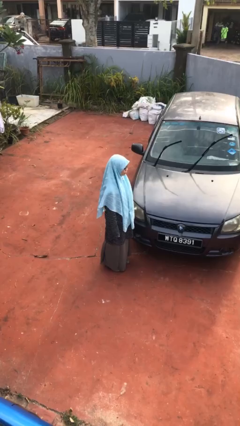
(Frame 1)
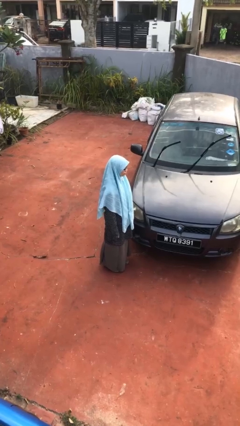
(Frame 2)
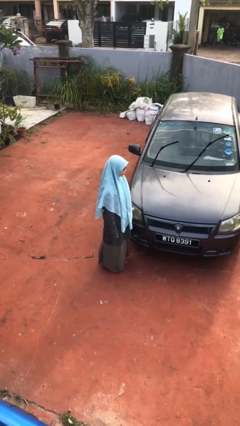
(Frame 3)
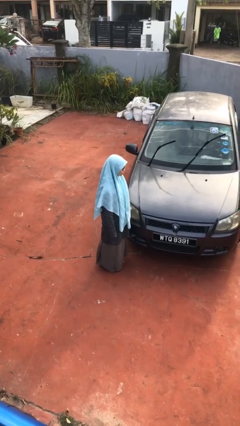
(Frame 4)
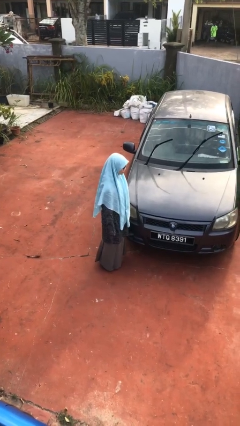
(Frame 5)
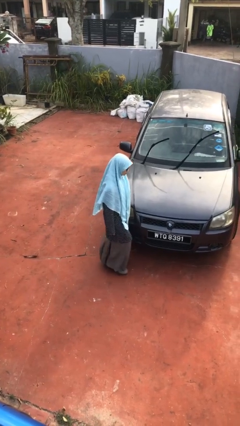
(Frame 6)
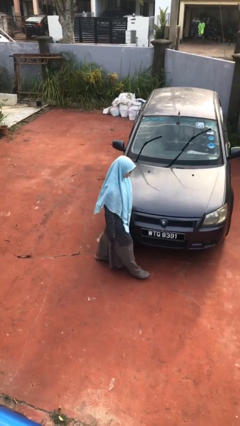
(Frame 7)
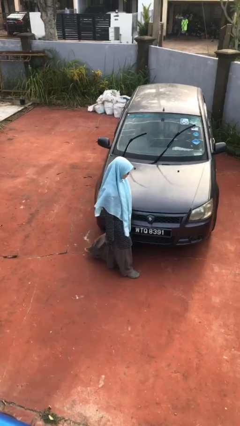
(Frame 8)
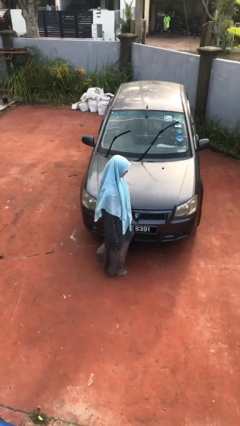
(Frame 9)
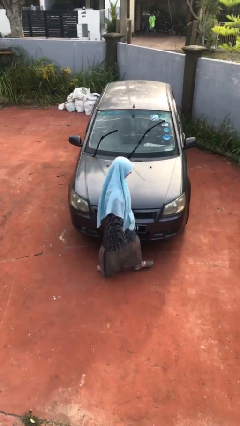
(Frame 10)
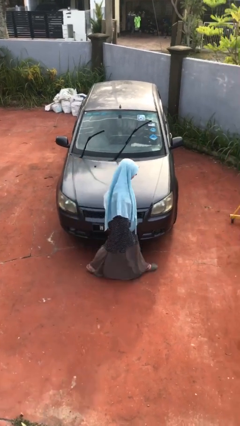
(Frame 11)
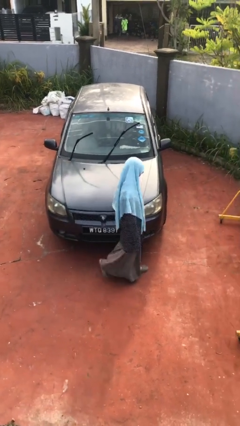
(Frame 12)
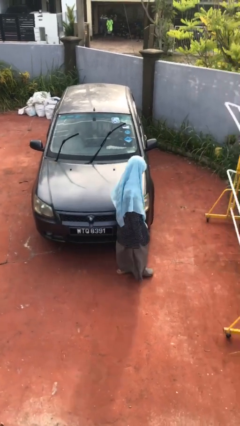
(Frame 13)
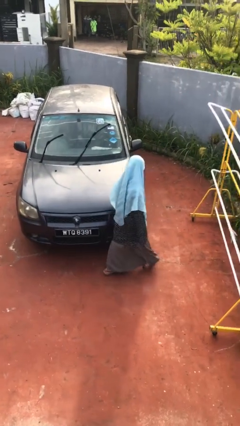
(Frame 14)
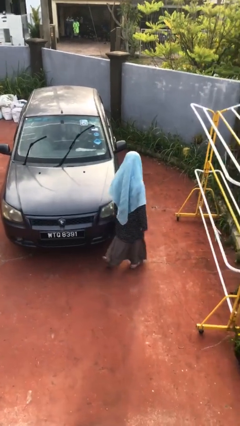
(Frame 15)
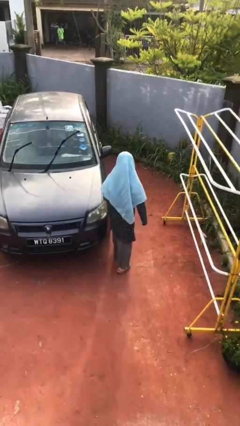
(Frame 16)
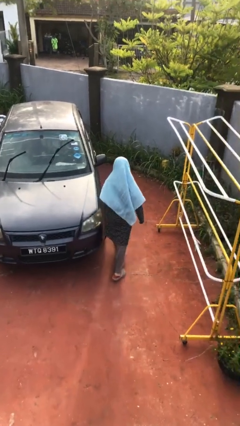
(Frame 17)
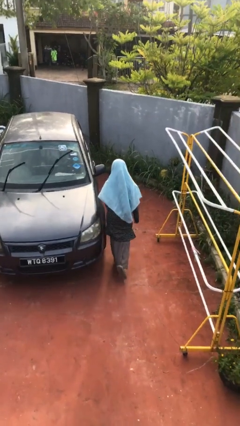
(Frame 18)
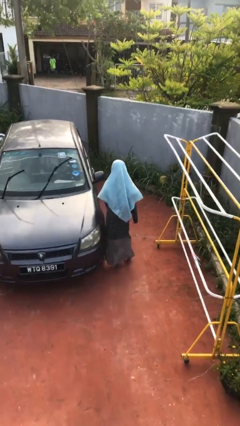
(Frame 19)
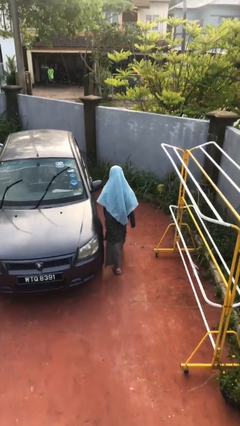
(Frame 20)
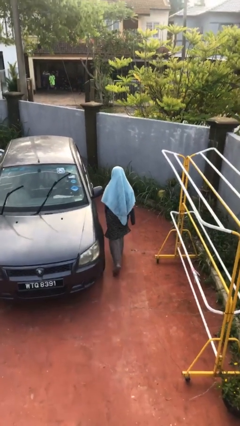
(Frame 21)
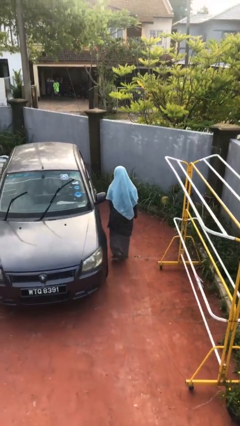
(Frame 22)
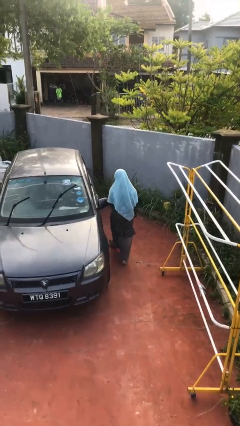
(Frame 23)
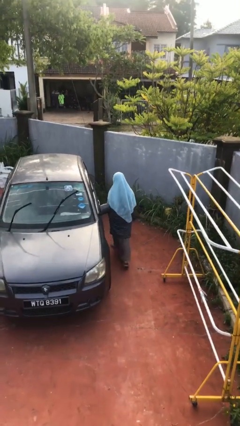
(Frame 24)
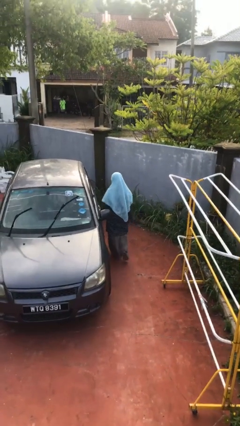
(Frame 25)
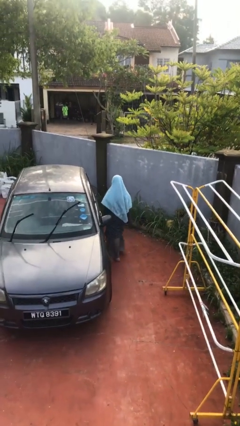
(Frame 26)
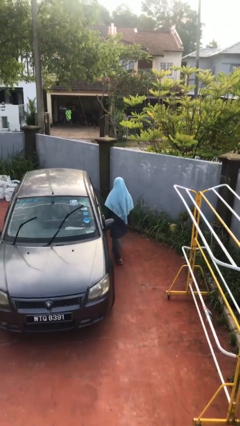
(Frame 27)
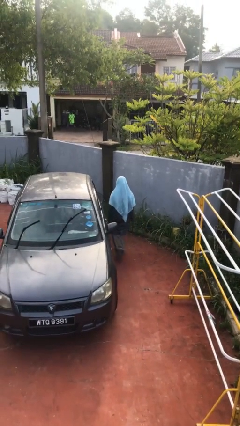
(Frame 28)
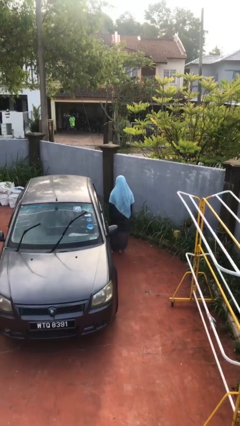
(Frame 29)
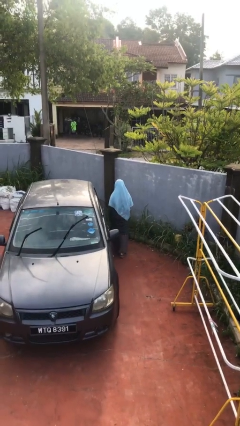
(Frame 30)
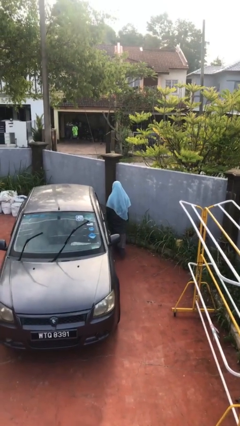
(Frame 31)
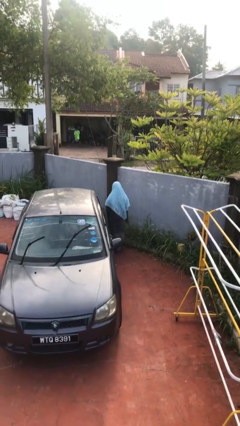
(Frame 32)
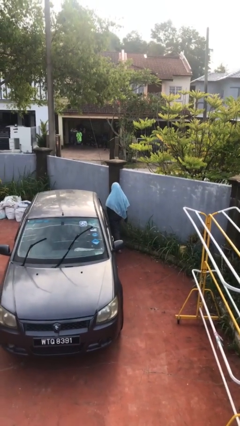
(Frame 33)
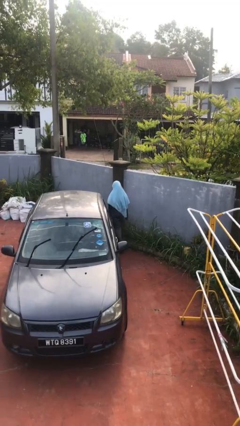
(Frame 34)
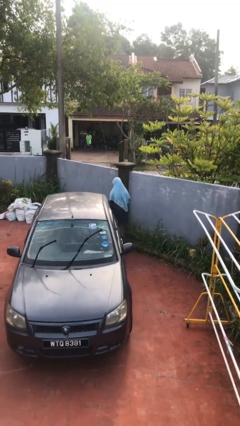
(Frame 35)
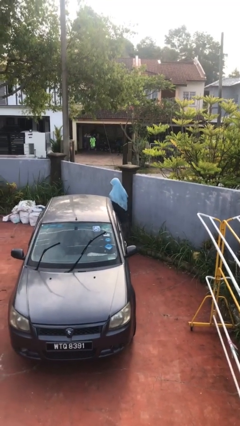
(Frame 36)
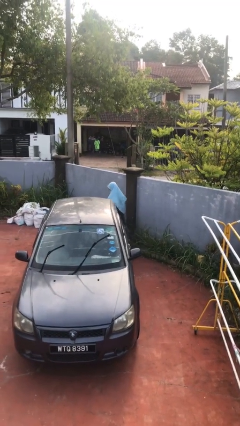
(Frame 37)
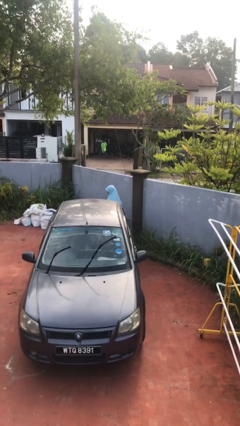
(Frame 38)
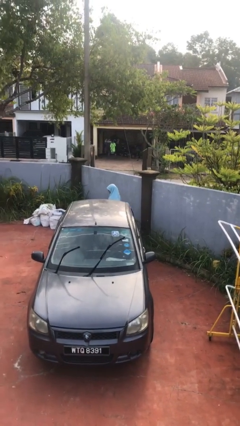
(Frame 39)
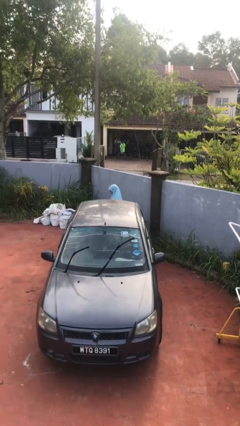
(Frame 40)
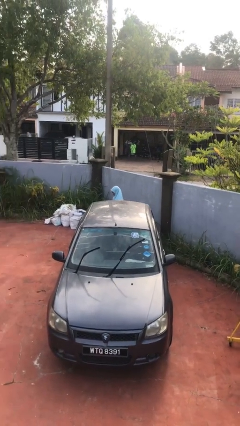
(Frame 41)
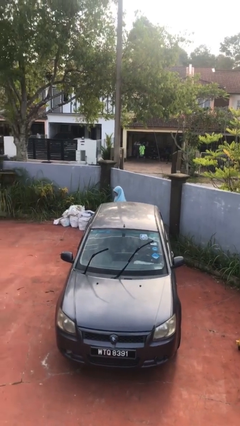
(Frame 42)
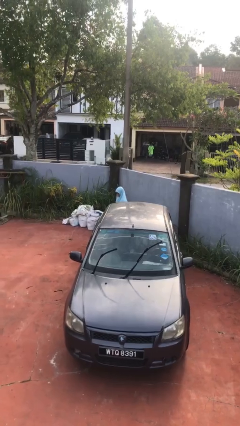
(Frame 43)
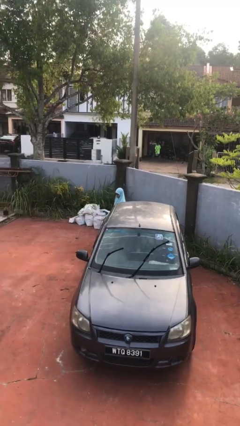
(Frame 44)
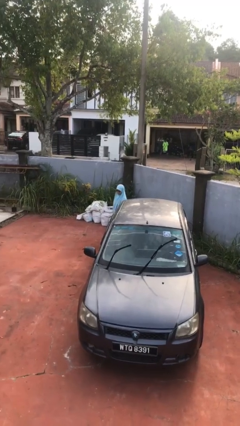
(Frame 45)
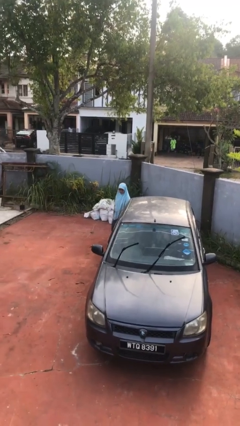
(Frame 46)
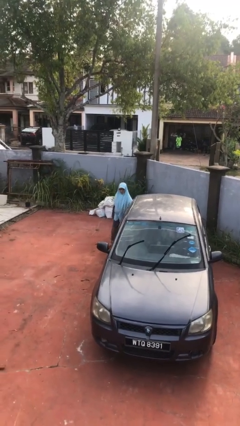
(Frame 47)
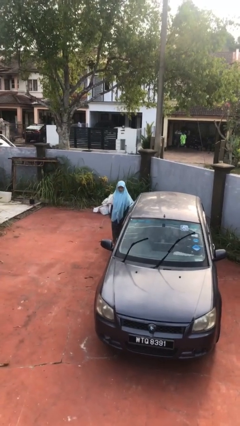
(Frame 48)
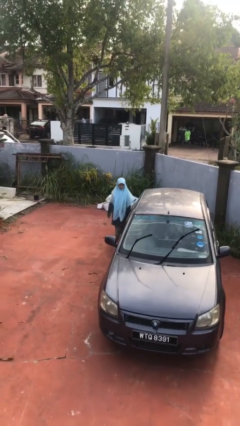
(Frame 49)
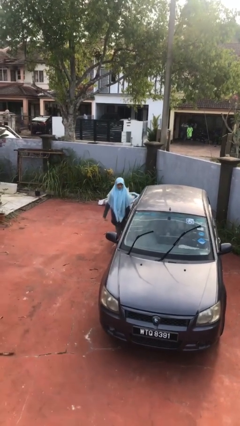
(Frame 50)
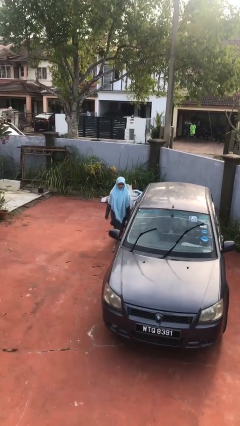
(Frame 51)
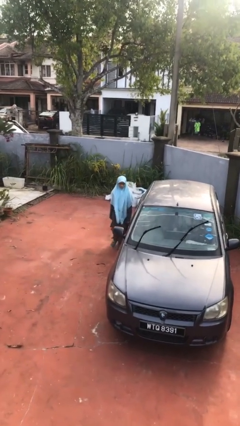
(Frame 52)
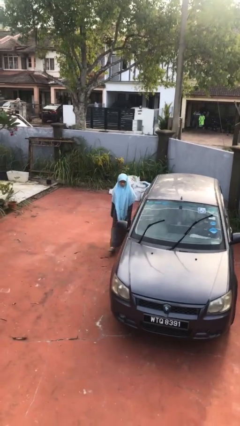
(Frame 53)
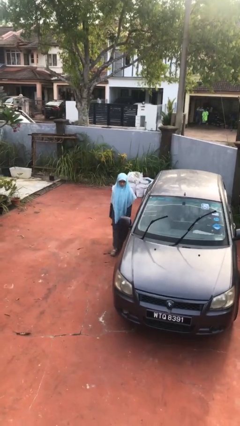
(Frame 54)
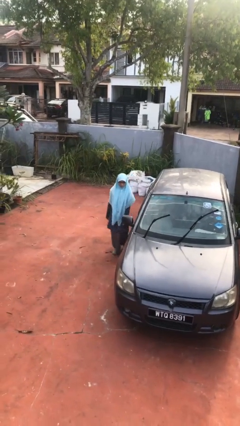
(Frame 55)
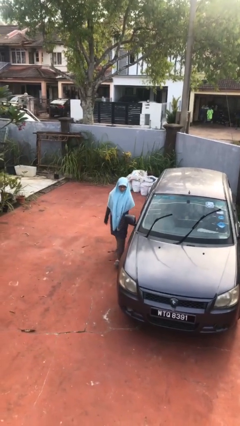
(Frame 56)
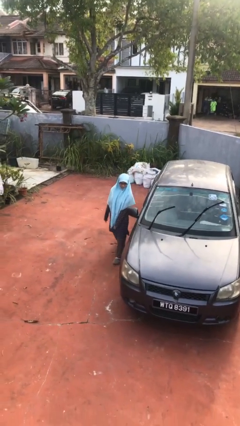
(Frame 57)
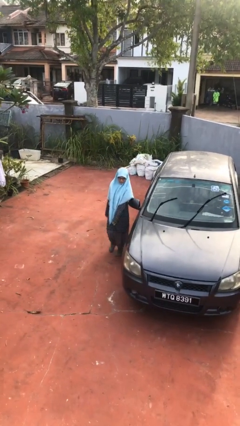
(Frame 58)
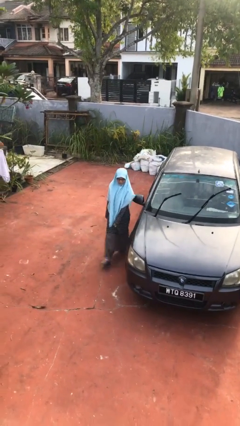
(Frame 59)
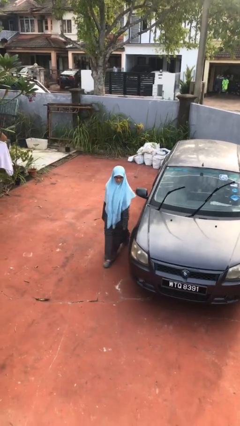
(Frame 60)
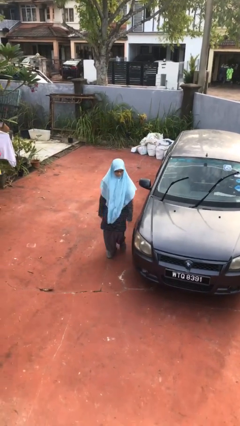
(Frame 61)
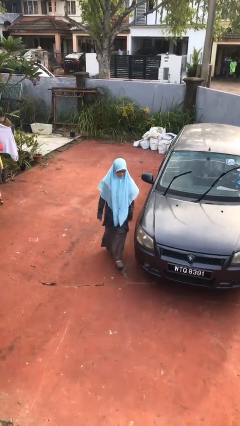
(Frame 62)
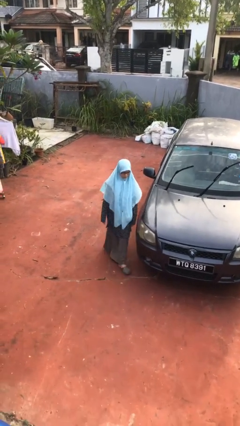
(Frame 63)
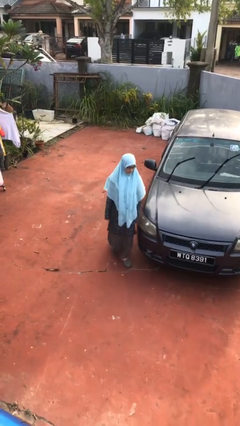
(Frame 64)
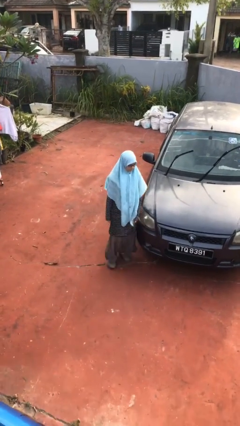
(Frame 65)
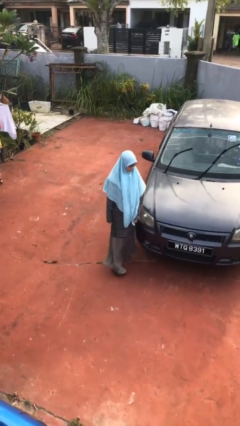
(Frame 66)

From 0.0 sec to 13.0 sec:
person walks around car

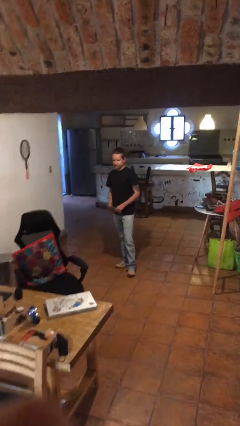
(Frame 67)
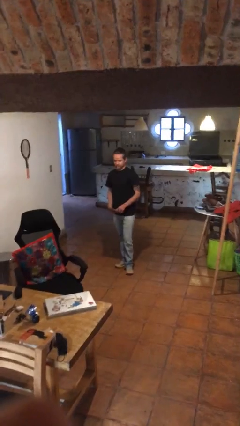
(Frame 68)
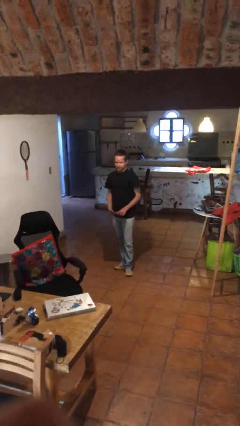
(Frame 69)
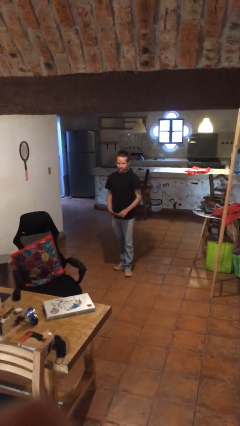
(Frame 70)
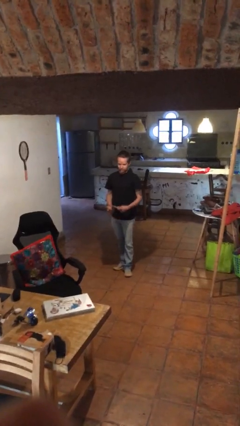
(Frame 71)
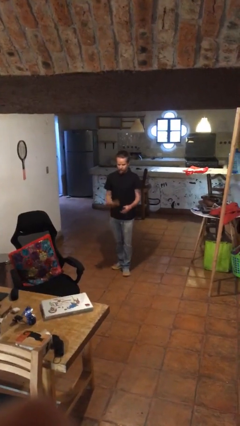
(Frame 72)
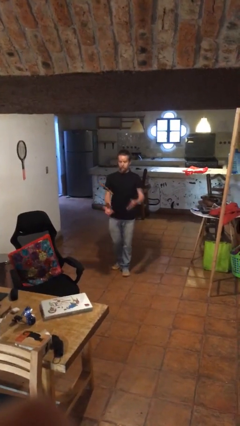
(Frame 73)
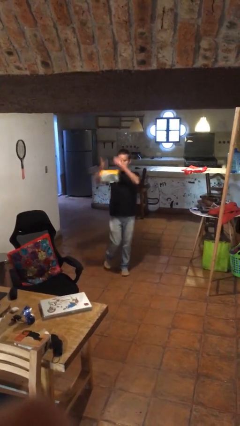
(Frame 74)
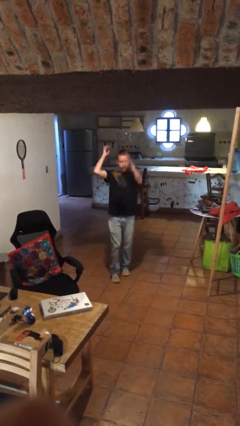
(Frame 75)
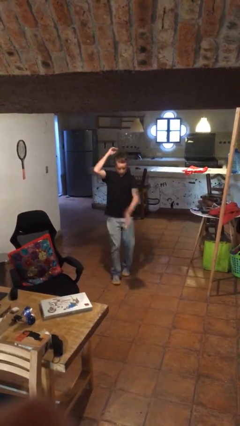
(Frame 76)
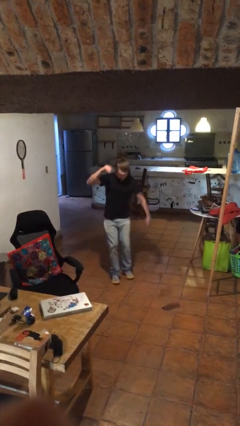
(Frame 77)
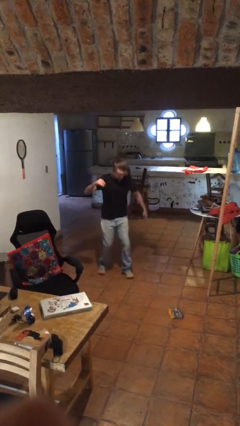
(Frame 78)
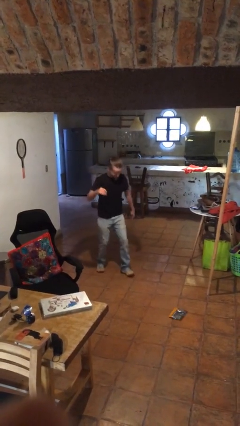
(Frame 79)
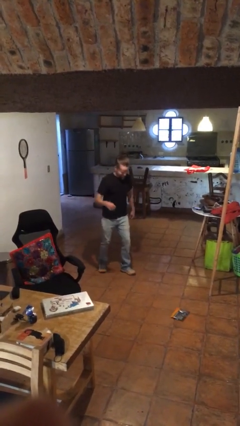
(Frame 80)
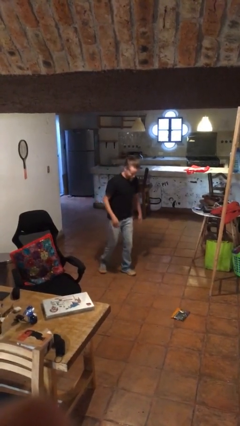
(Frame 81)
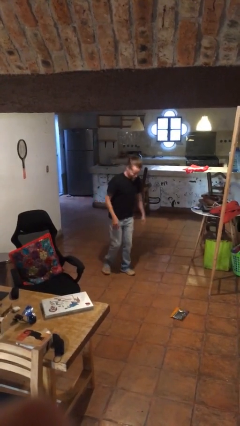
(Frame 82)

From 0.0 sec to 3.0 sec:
person drops object

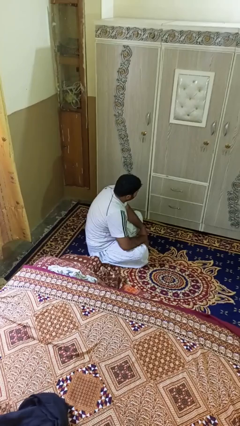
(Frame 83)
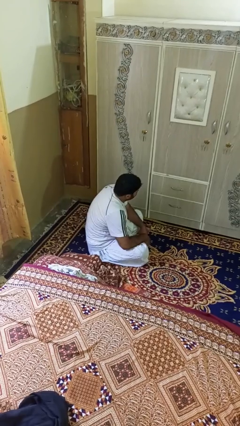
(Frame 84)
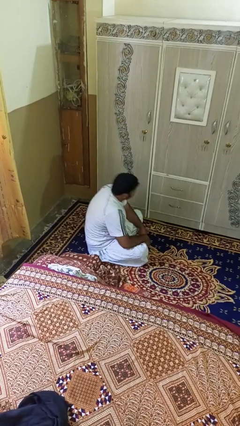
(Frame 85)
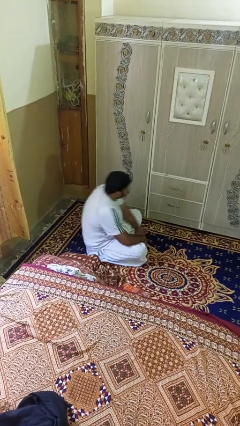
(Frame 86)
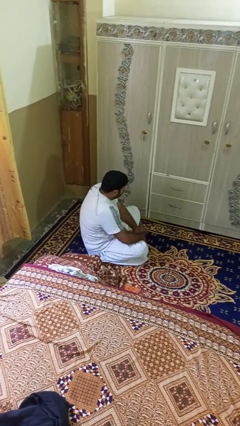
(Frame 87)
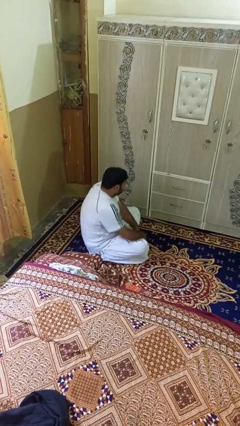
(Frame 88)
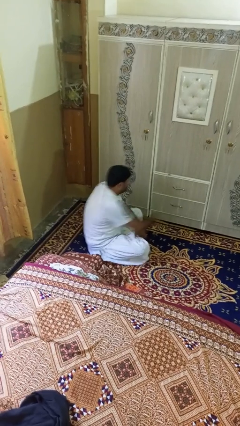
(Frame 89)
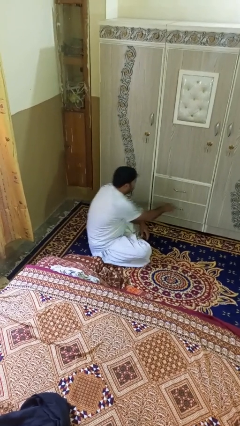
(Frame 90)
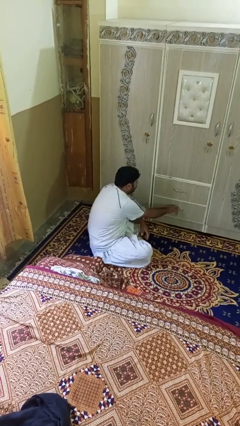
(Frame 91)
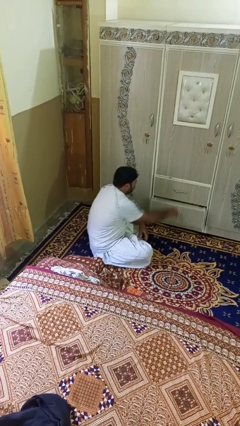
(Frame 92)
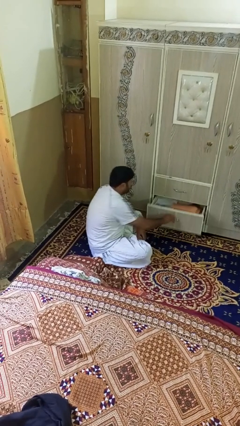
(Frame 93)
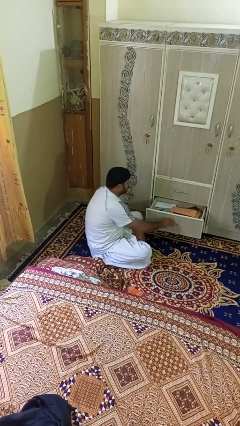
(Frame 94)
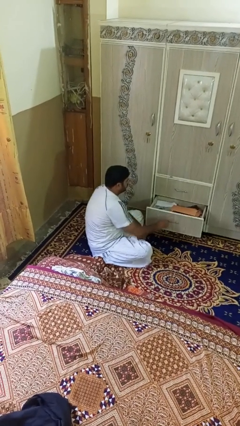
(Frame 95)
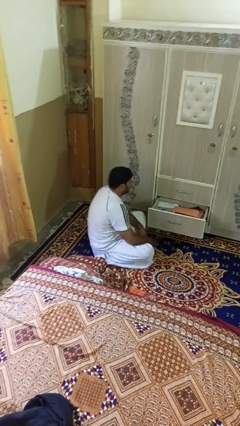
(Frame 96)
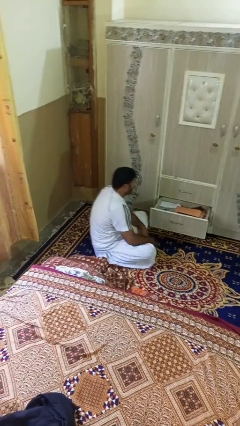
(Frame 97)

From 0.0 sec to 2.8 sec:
person opens dresser drawer
